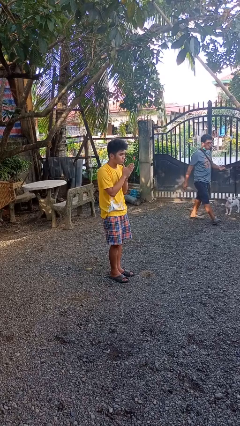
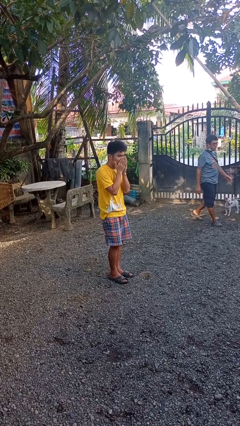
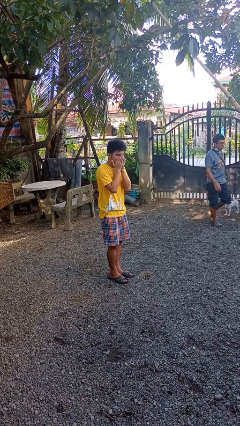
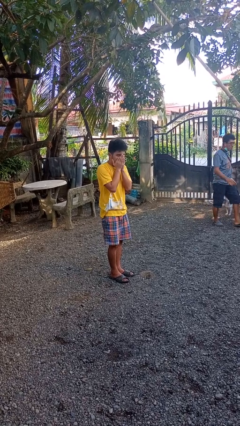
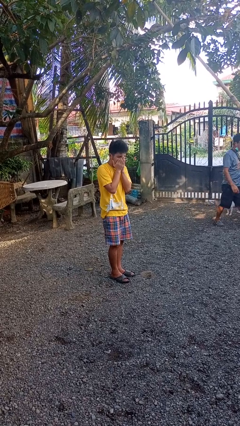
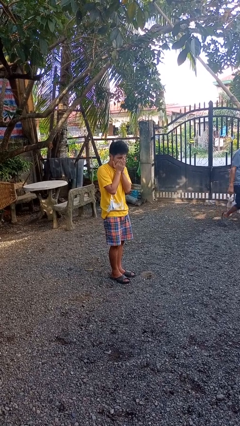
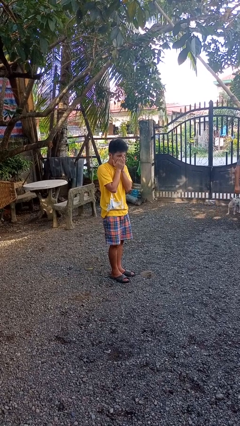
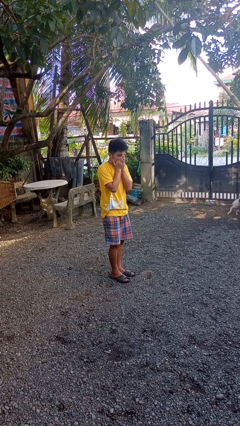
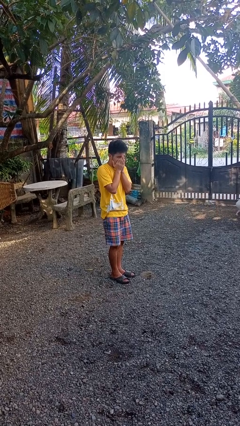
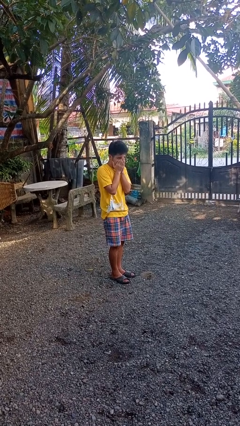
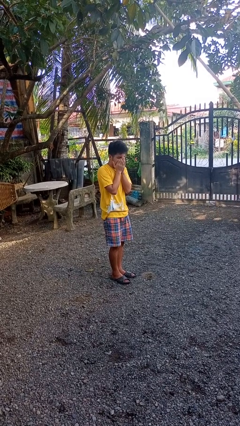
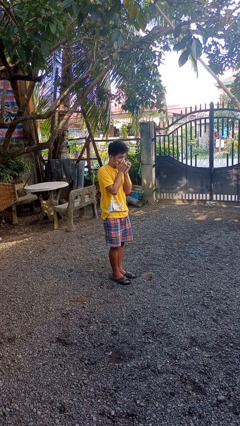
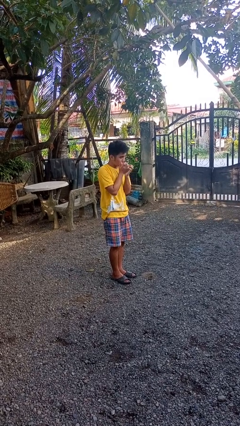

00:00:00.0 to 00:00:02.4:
person blows into hands

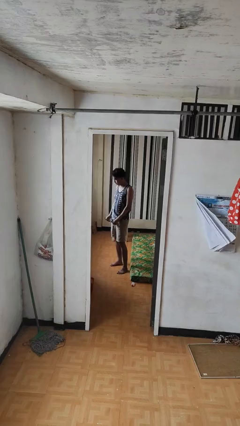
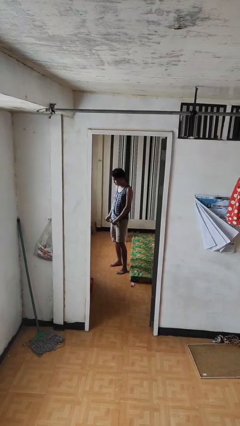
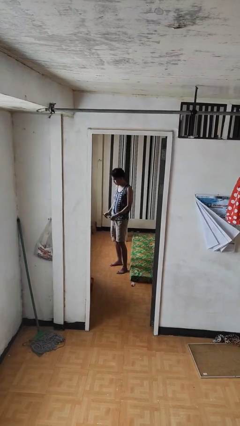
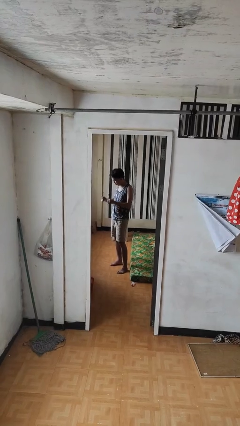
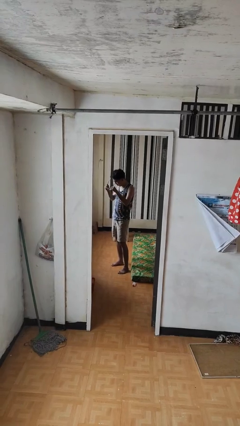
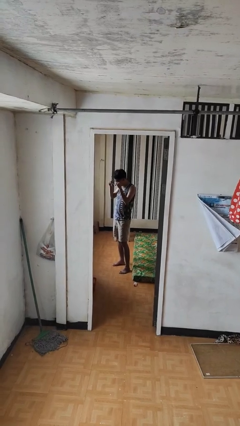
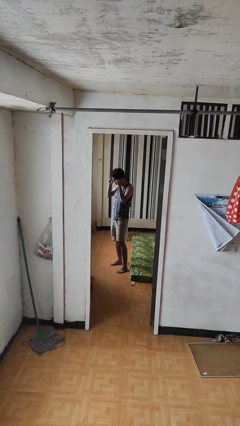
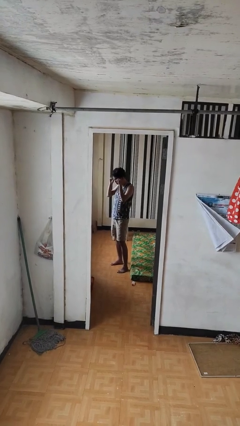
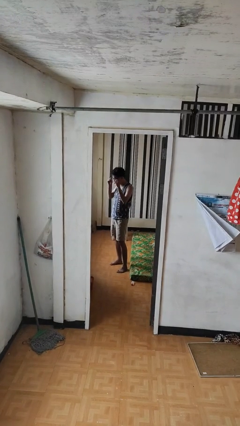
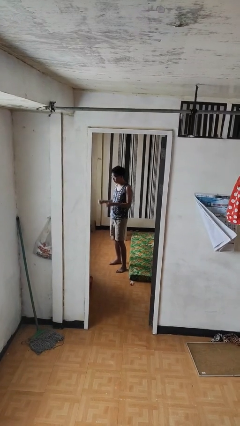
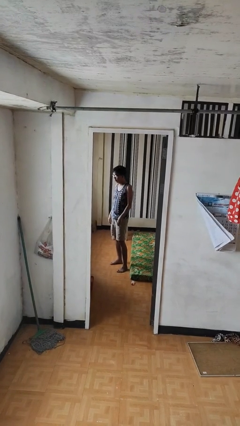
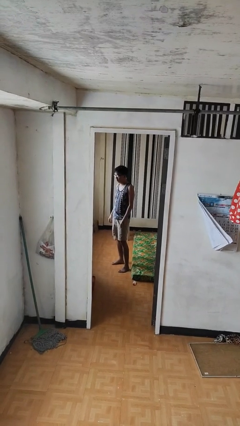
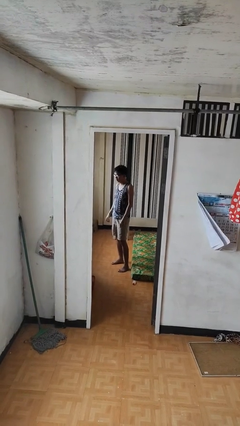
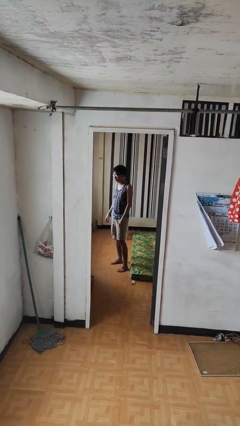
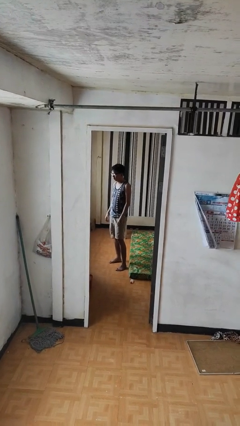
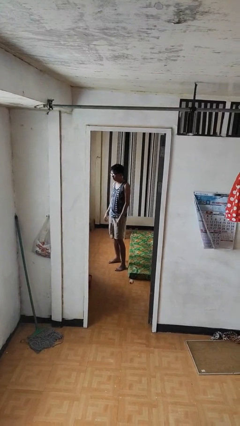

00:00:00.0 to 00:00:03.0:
person puts on glasses

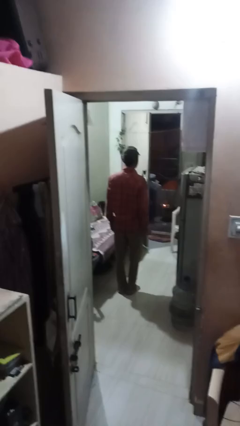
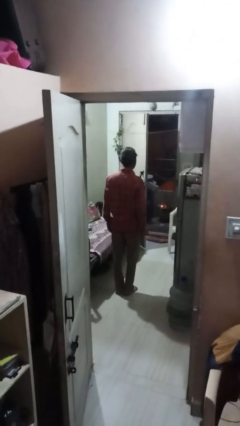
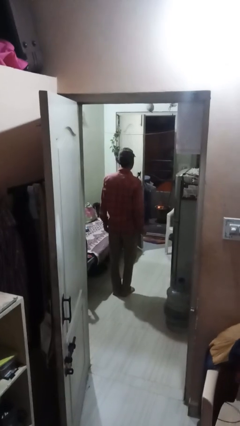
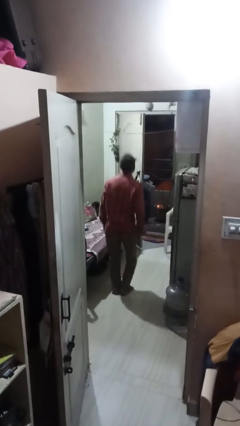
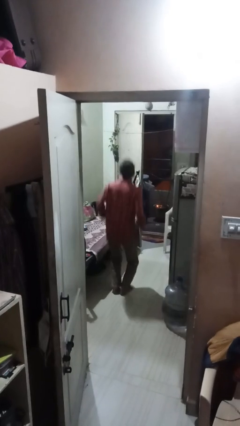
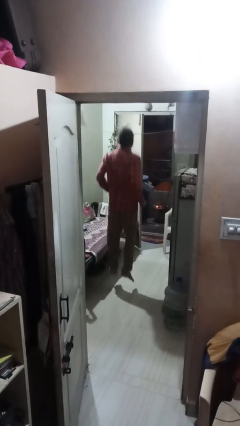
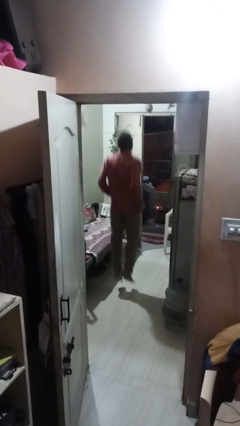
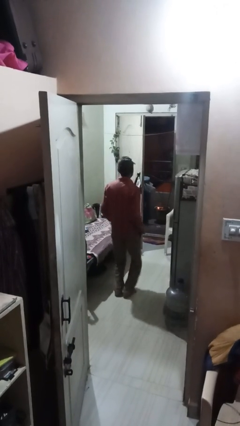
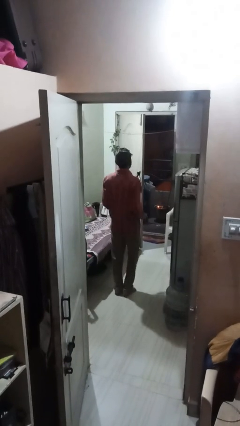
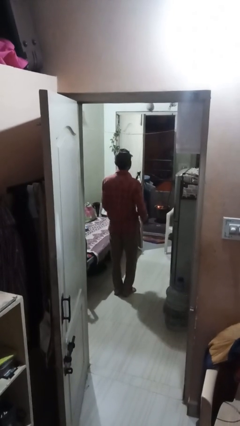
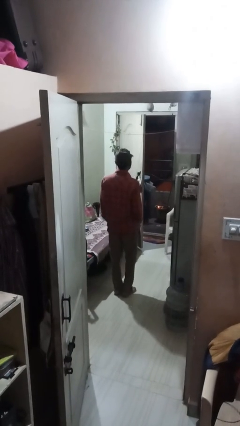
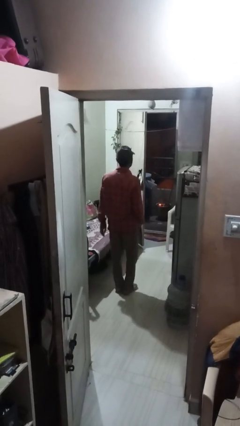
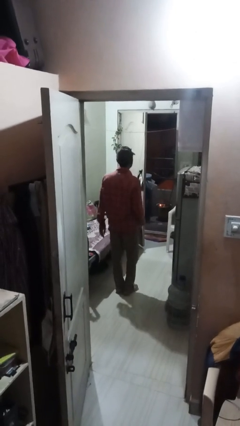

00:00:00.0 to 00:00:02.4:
person jumps

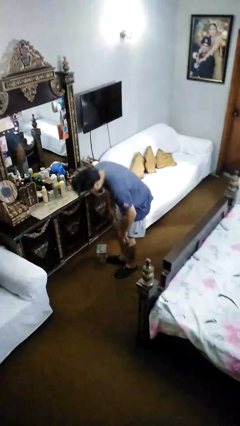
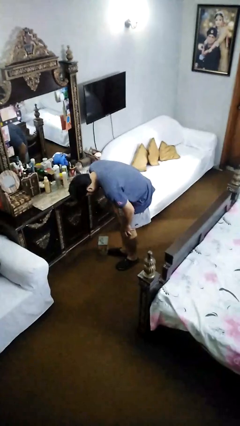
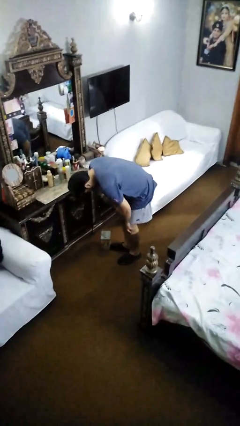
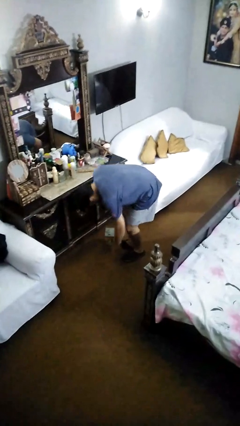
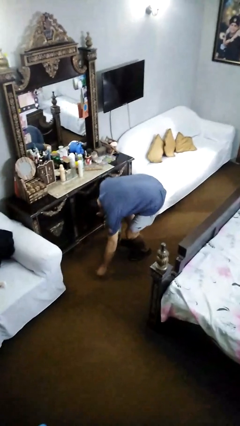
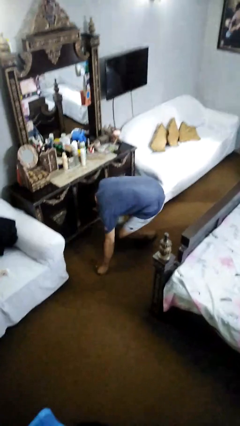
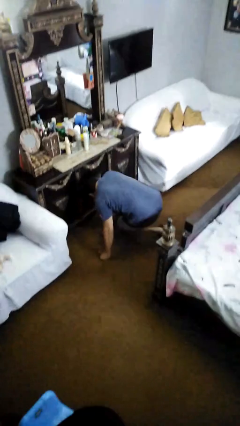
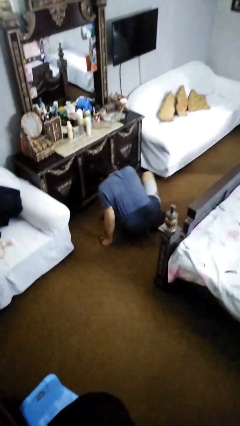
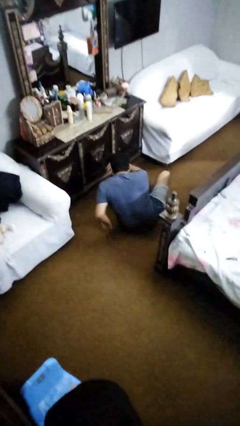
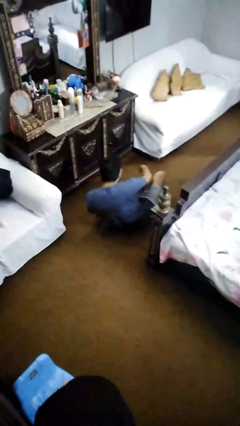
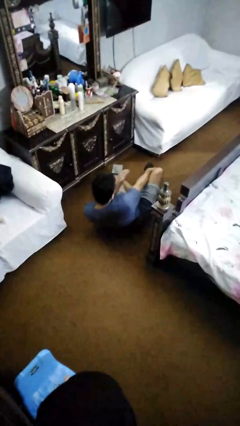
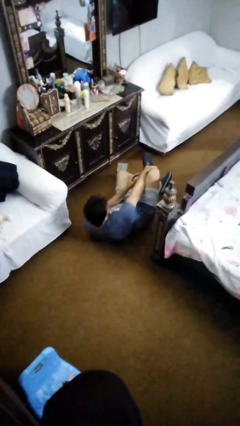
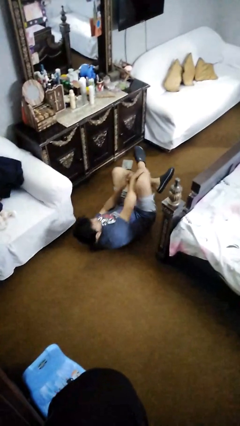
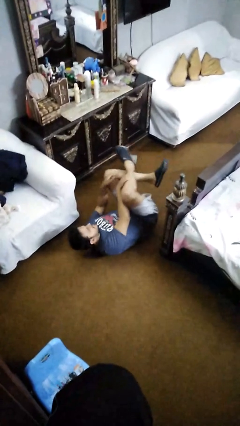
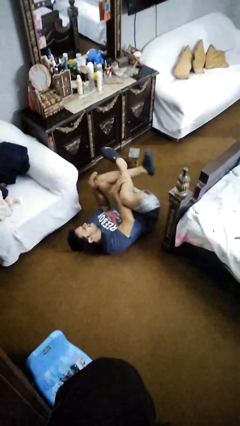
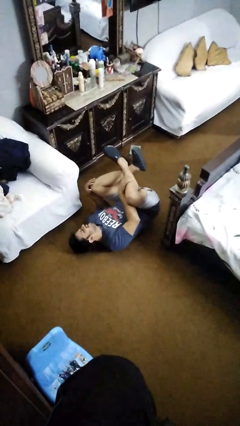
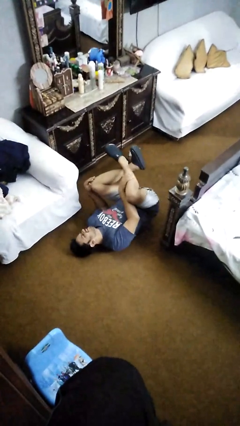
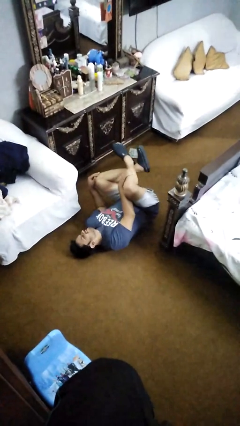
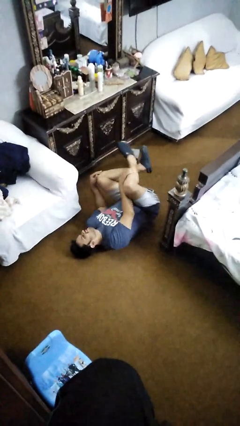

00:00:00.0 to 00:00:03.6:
person lies down on floor

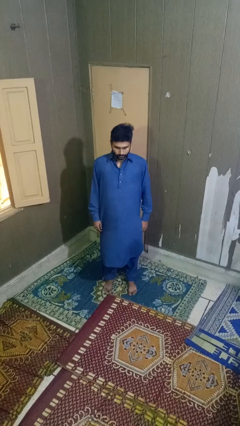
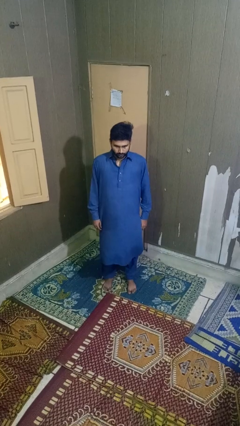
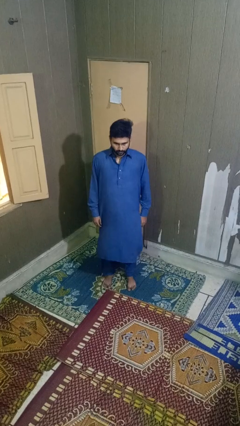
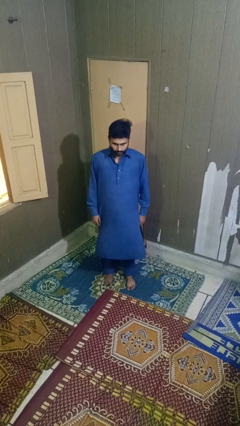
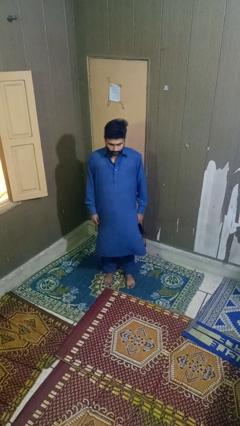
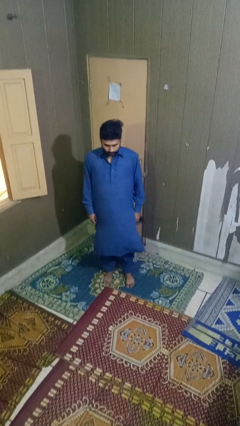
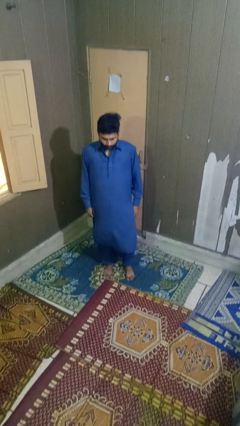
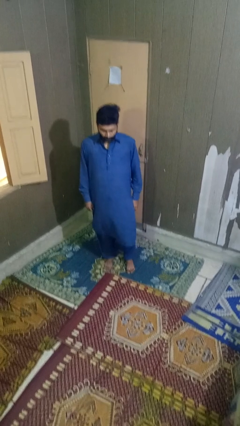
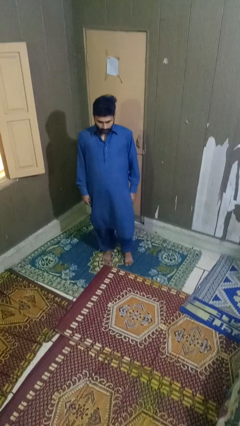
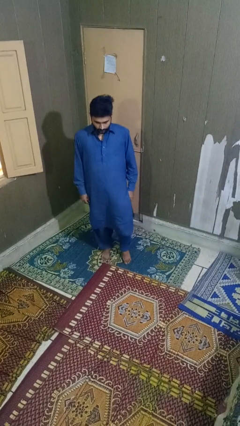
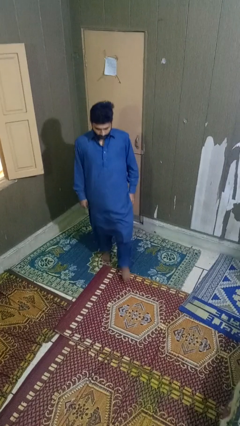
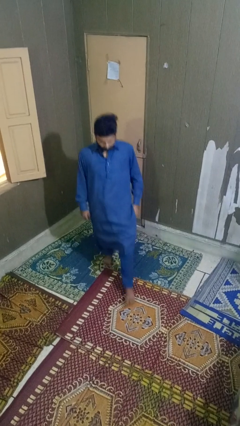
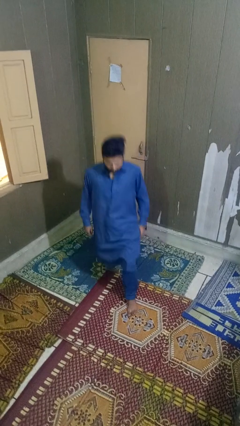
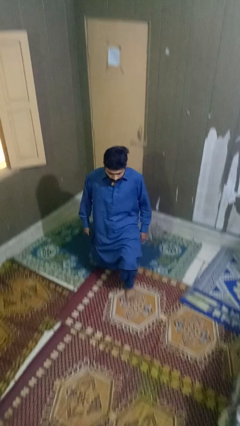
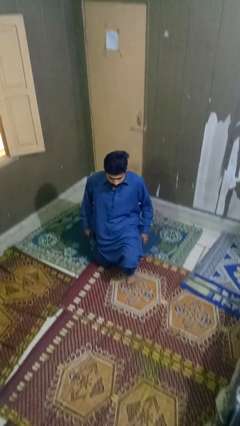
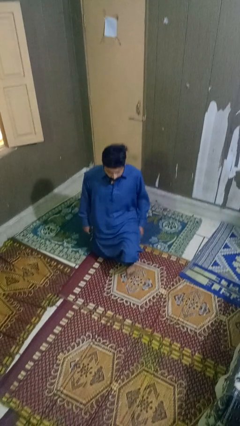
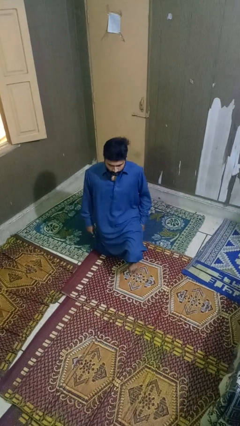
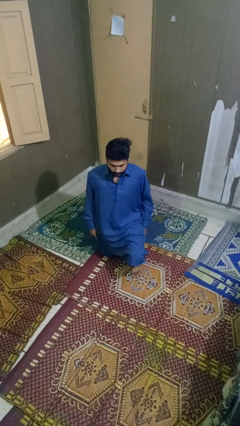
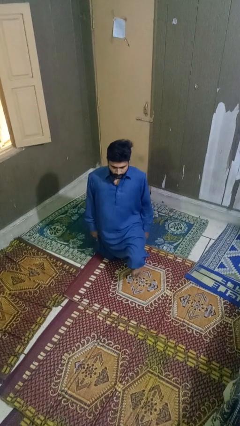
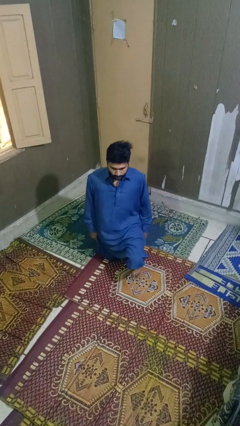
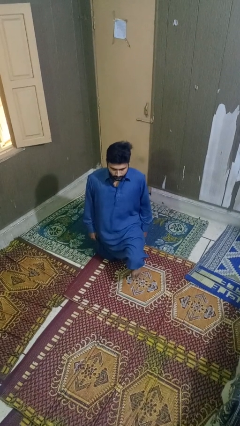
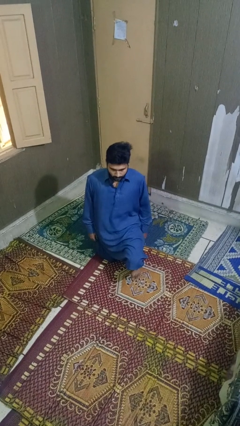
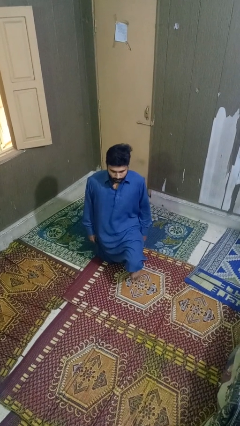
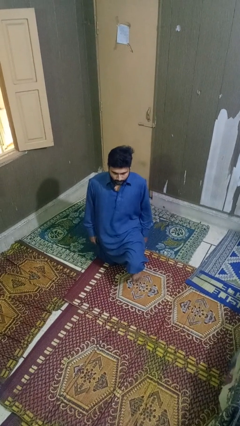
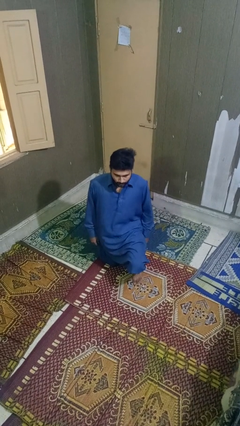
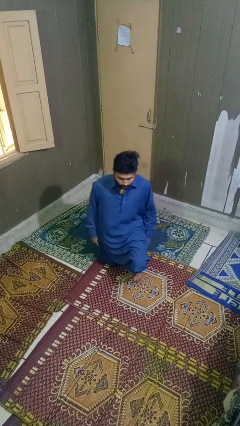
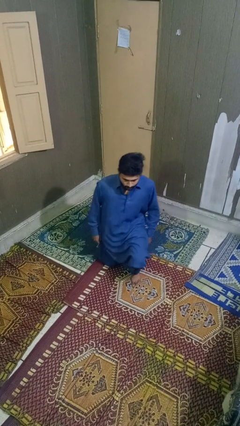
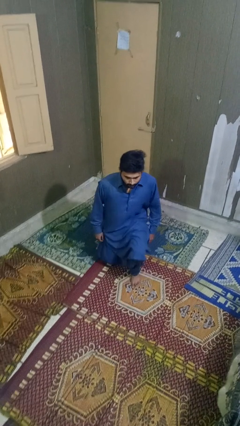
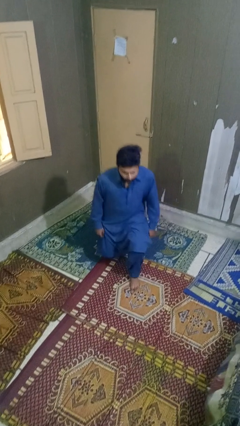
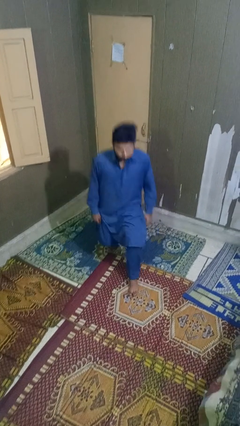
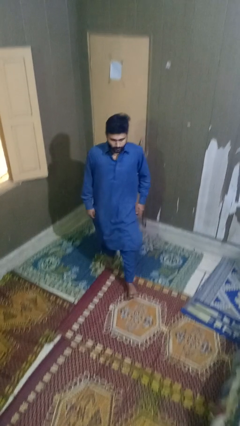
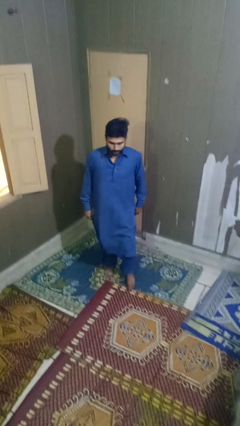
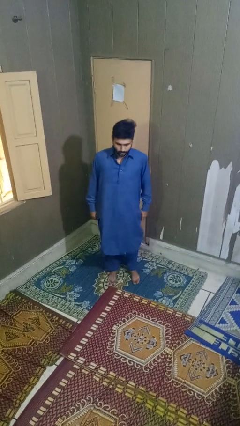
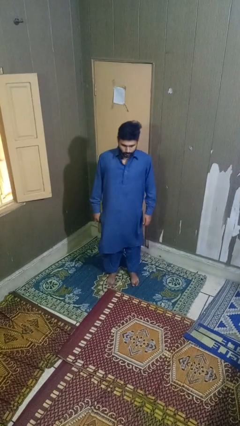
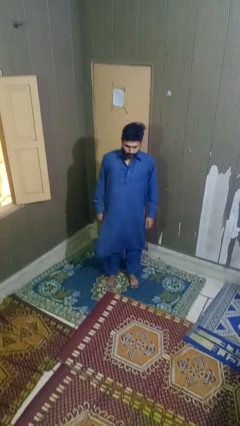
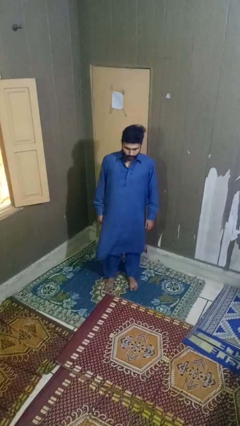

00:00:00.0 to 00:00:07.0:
person exercises with lunges
